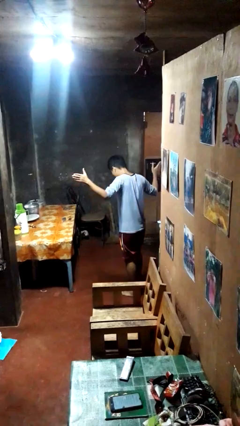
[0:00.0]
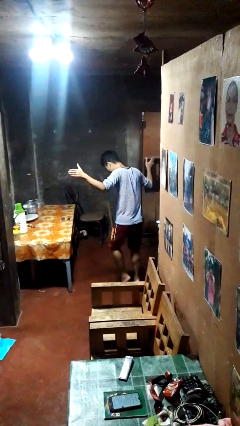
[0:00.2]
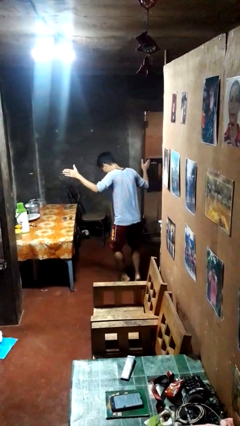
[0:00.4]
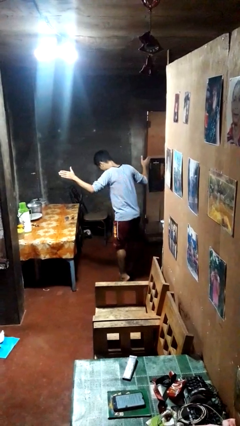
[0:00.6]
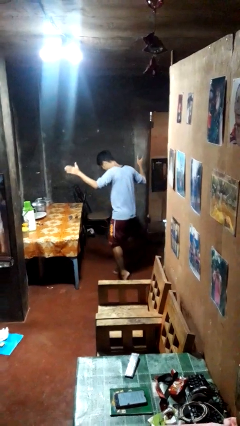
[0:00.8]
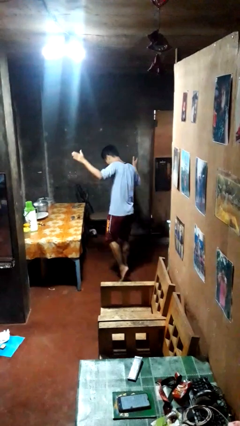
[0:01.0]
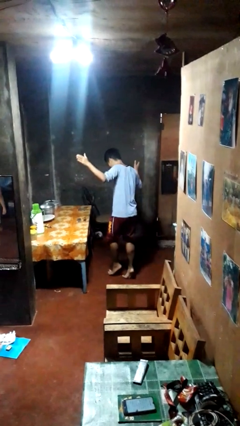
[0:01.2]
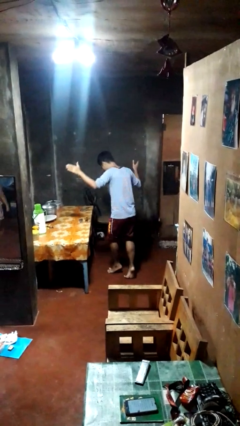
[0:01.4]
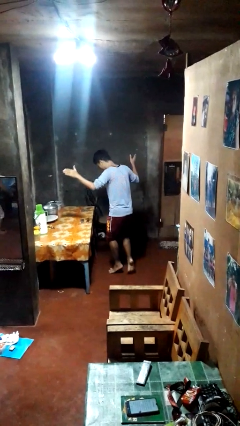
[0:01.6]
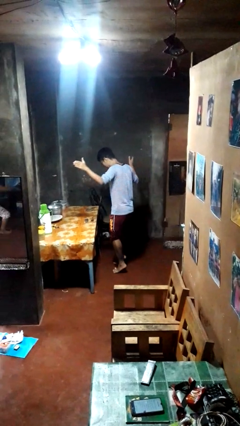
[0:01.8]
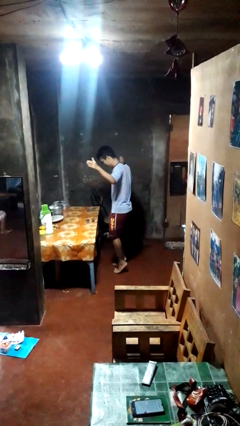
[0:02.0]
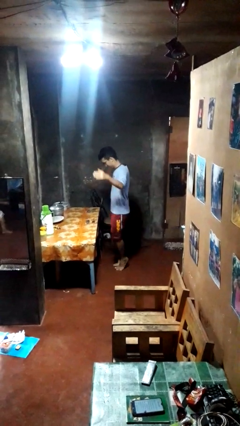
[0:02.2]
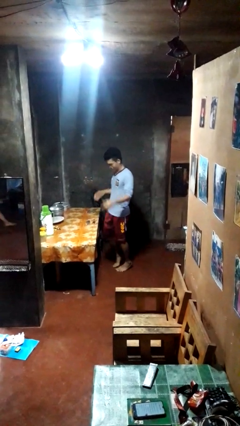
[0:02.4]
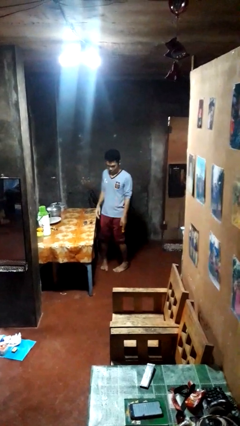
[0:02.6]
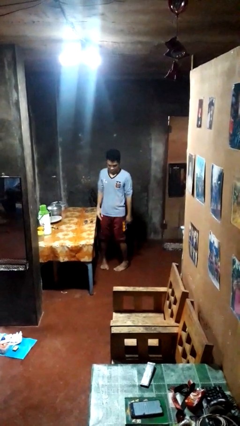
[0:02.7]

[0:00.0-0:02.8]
person walks tiptoe

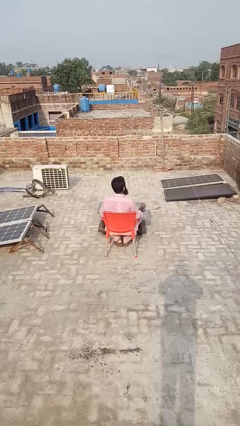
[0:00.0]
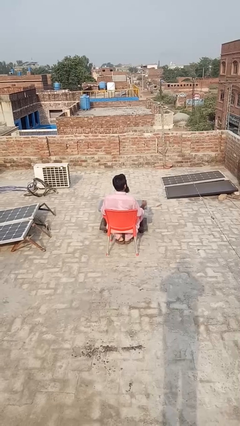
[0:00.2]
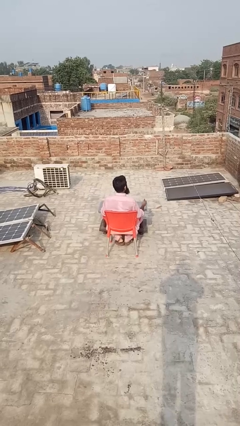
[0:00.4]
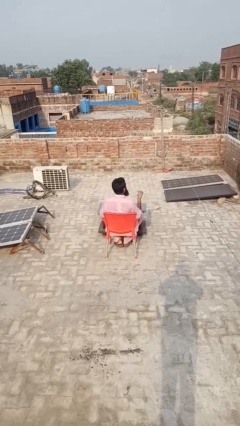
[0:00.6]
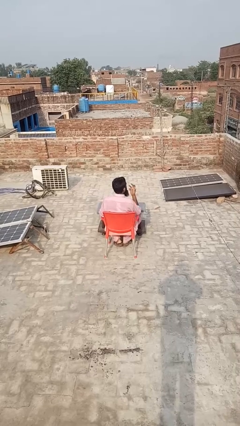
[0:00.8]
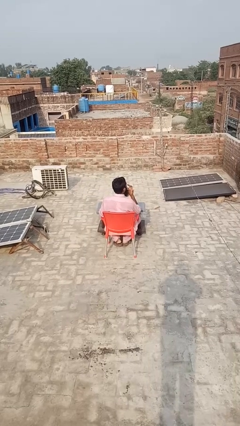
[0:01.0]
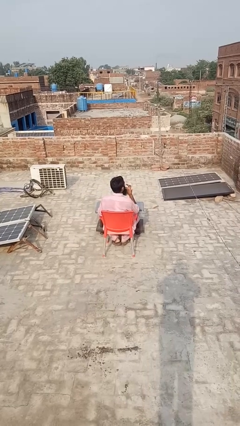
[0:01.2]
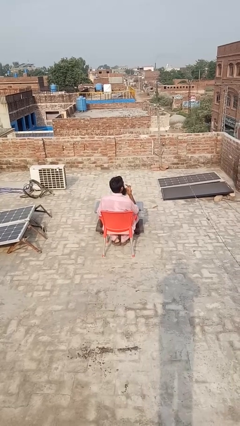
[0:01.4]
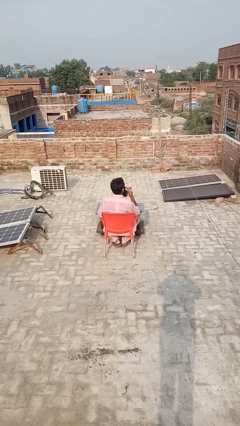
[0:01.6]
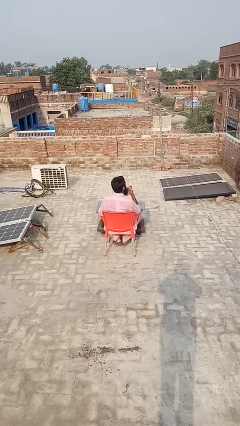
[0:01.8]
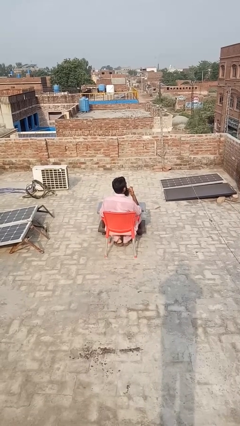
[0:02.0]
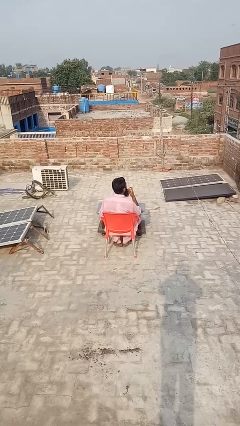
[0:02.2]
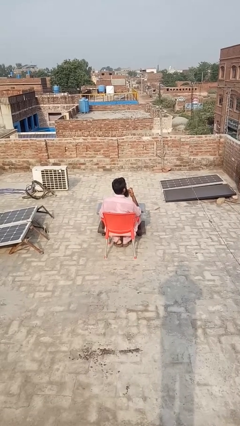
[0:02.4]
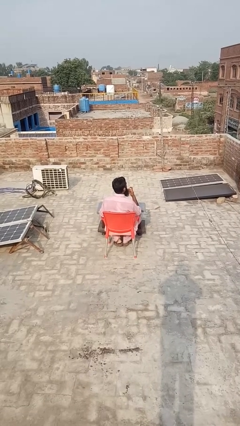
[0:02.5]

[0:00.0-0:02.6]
person licks fingers

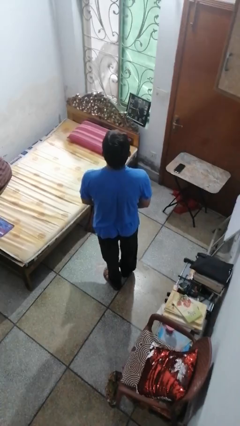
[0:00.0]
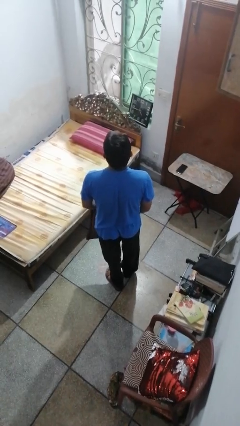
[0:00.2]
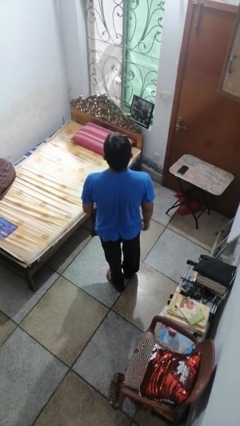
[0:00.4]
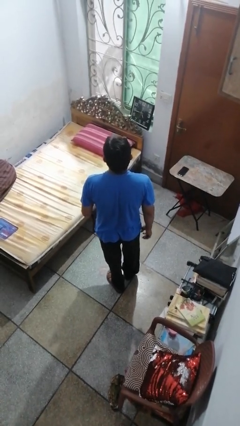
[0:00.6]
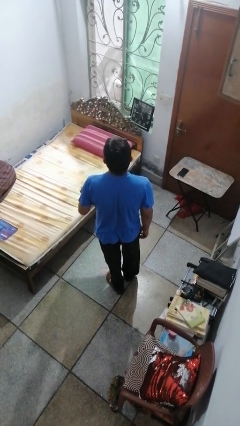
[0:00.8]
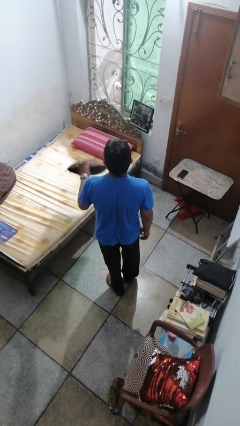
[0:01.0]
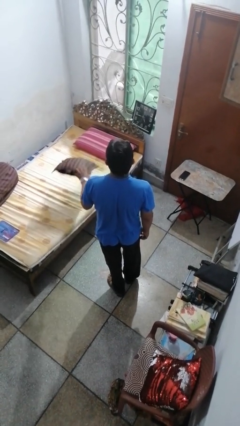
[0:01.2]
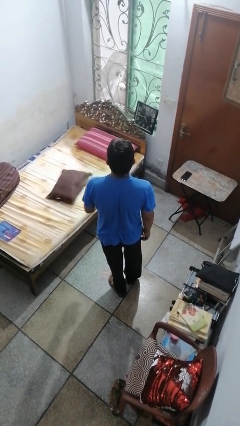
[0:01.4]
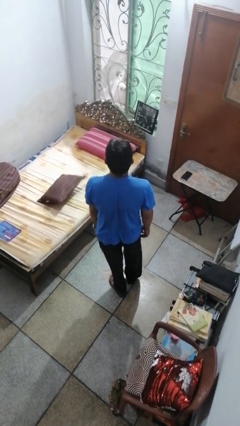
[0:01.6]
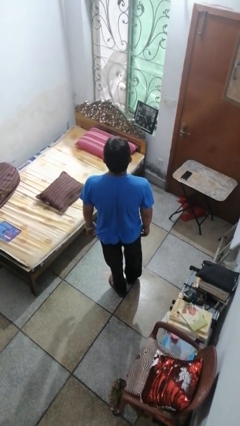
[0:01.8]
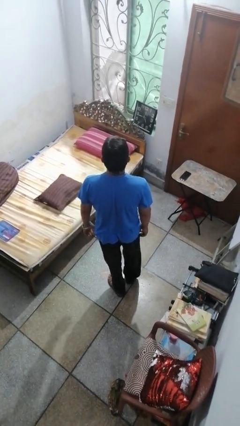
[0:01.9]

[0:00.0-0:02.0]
person throws object on bed

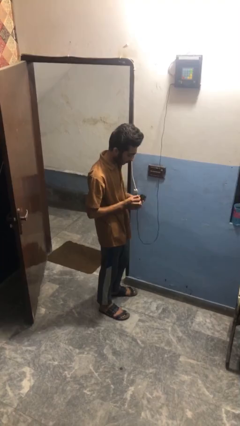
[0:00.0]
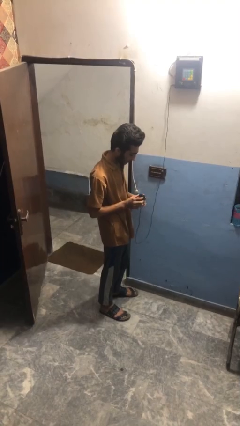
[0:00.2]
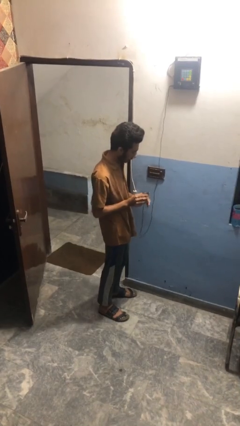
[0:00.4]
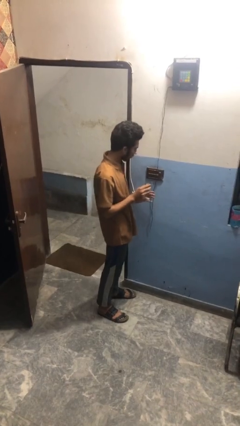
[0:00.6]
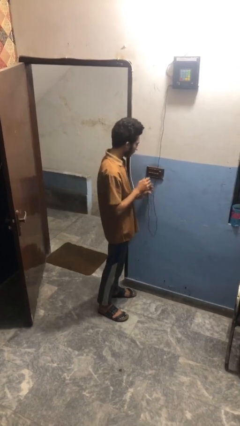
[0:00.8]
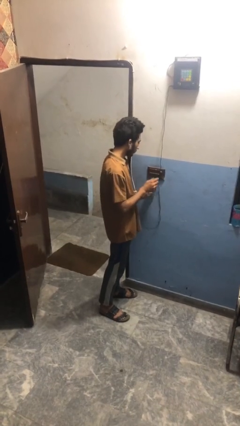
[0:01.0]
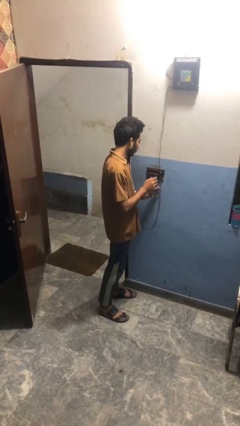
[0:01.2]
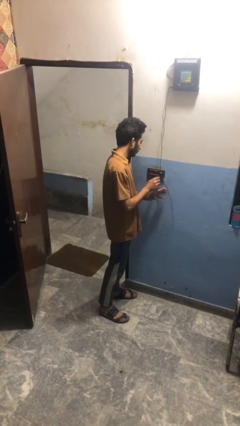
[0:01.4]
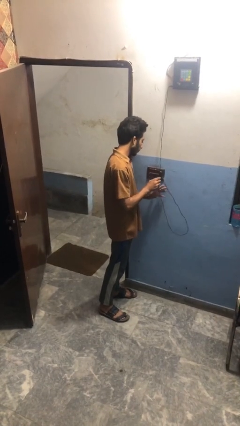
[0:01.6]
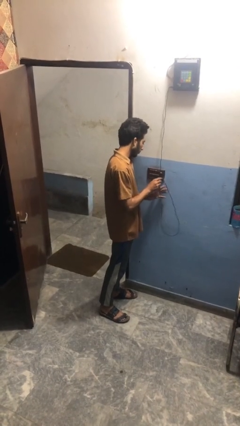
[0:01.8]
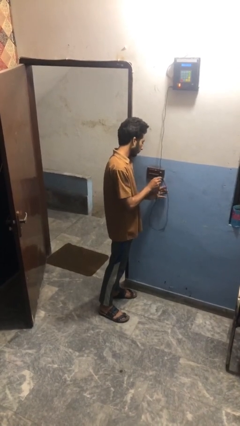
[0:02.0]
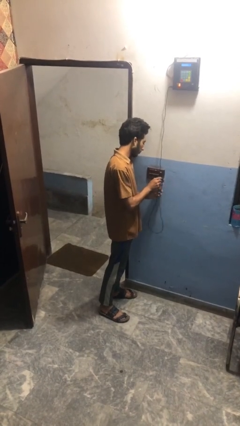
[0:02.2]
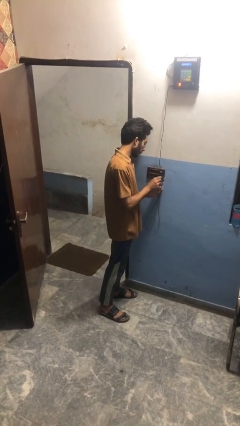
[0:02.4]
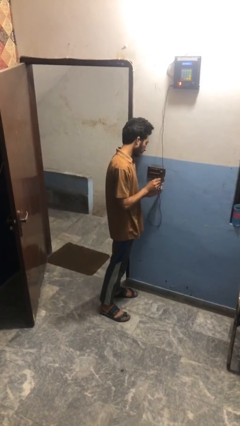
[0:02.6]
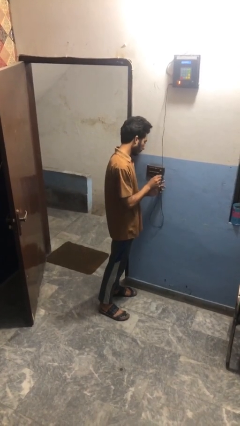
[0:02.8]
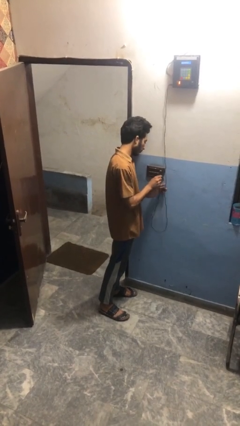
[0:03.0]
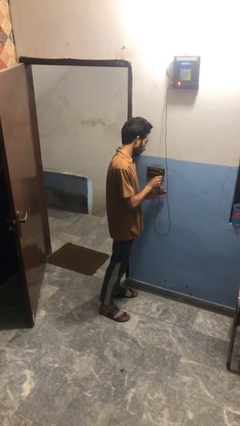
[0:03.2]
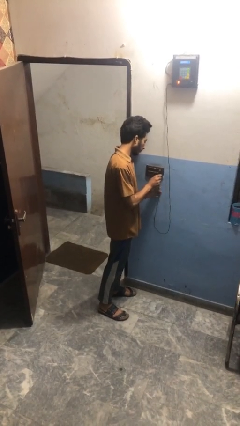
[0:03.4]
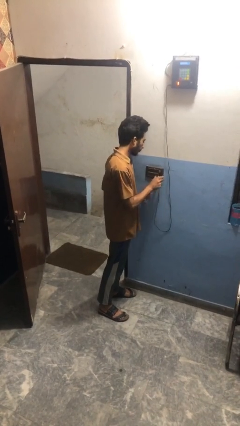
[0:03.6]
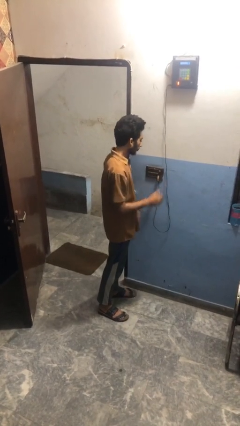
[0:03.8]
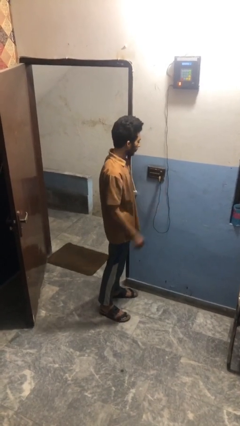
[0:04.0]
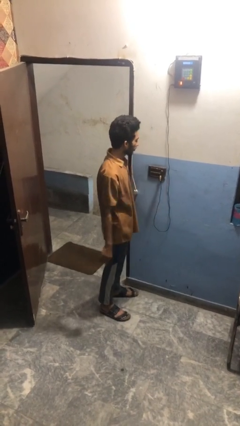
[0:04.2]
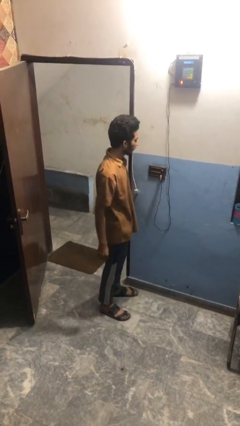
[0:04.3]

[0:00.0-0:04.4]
person plugs into electrical socket

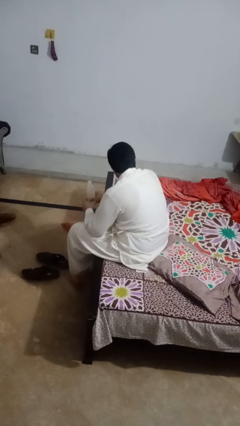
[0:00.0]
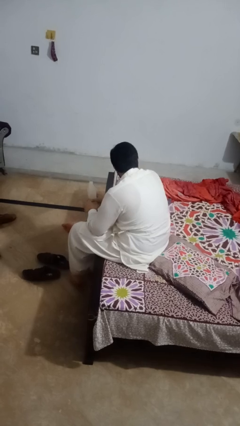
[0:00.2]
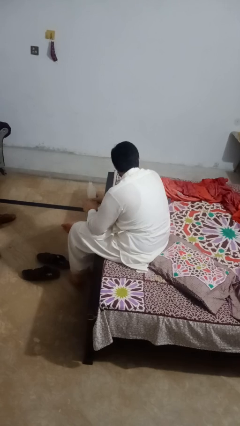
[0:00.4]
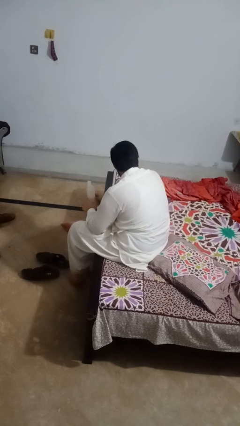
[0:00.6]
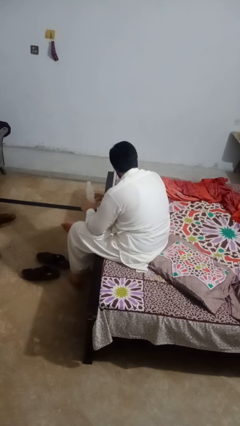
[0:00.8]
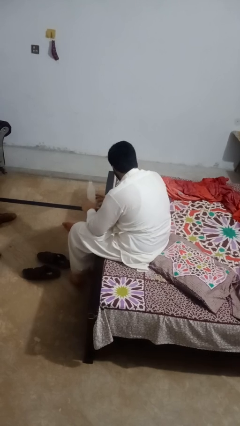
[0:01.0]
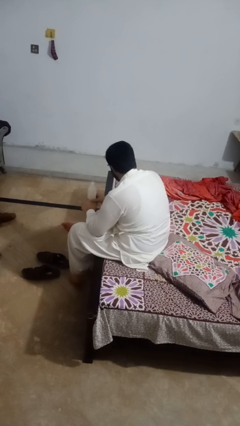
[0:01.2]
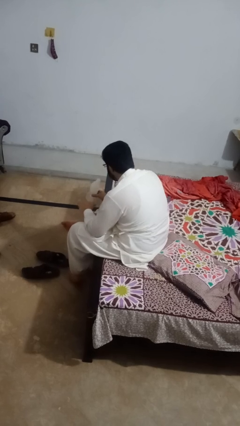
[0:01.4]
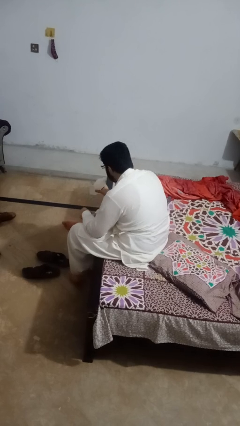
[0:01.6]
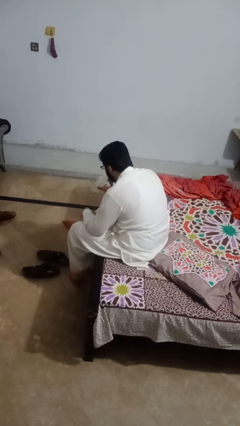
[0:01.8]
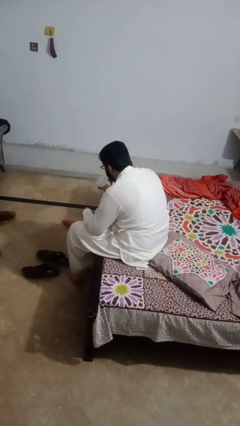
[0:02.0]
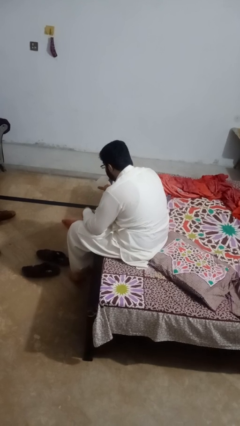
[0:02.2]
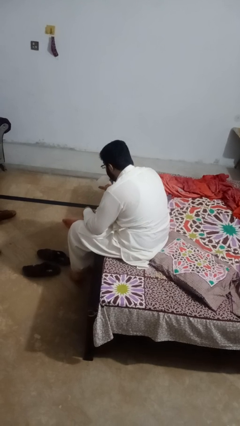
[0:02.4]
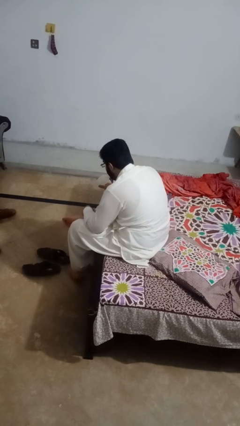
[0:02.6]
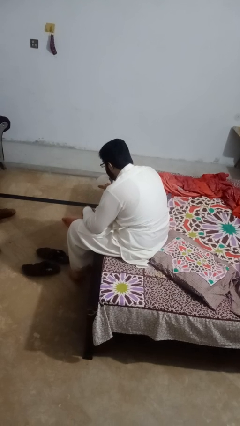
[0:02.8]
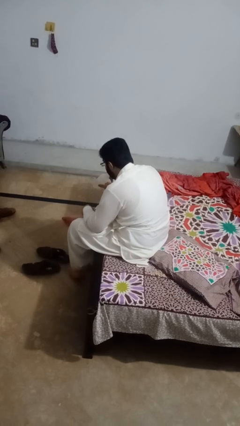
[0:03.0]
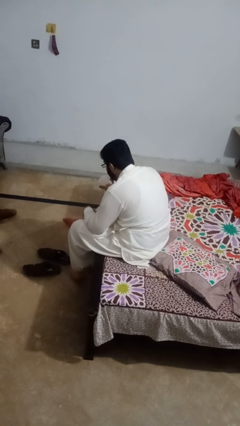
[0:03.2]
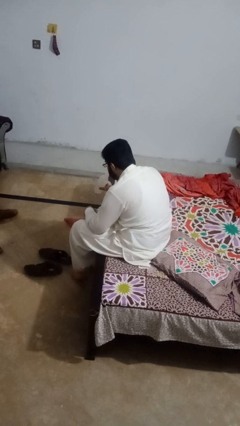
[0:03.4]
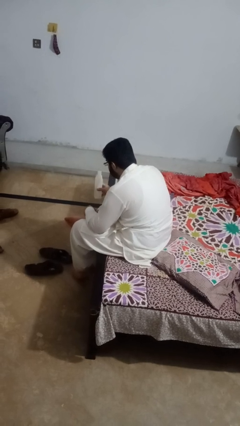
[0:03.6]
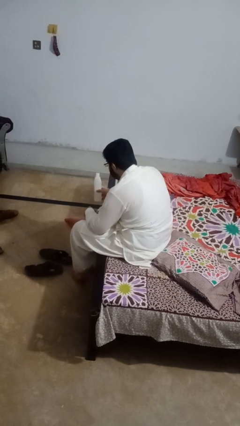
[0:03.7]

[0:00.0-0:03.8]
person drinks from straw

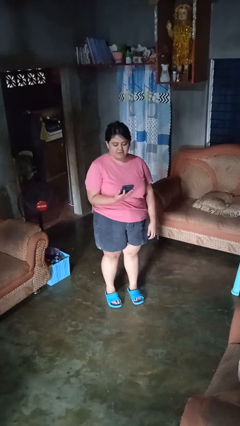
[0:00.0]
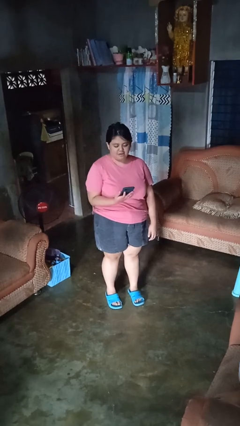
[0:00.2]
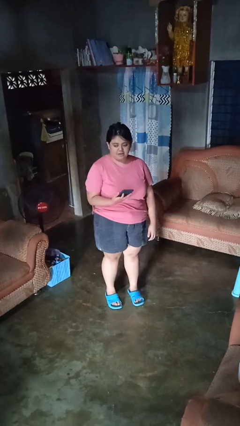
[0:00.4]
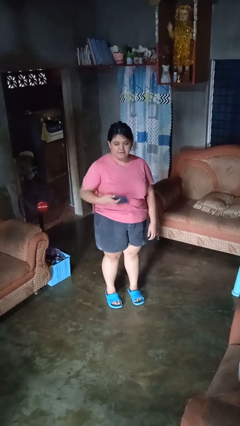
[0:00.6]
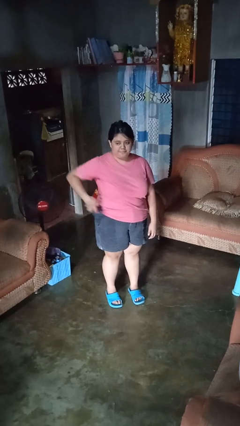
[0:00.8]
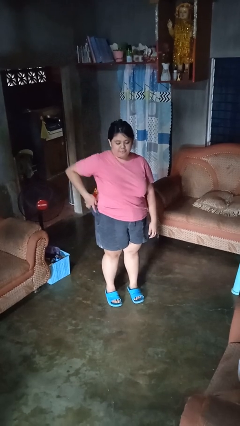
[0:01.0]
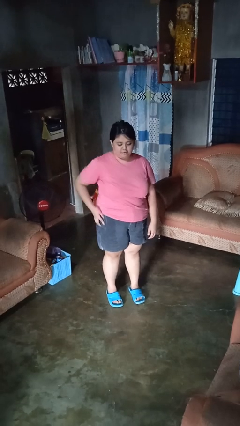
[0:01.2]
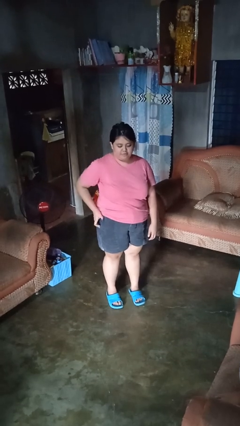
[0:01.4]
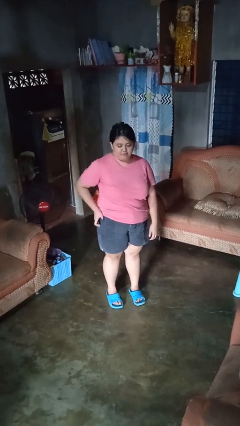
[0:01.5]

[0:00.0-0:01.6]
person puts phone into pocket

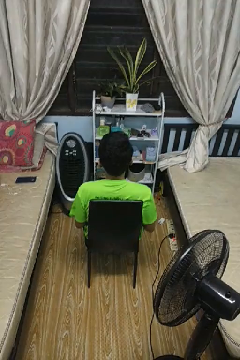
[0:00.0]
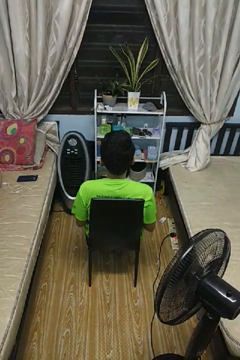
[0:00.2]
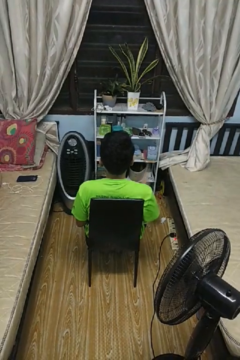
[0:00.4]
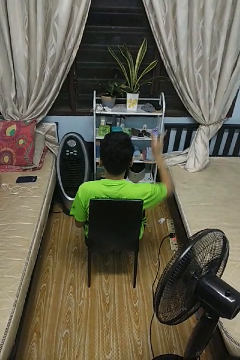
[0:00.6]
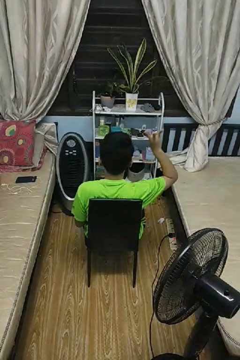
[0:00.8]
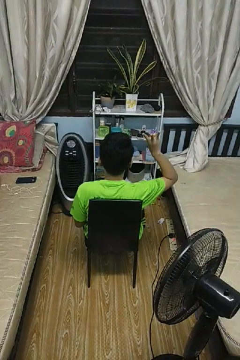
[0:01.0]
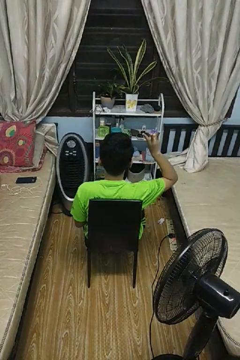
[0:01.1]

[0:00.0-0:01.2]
person gestures number three
